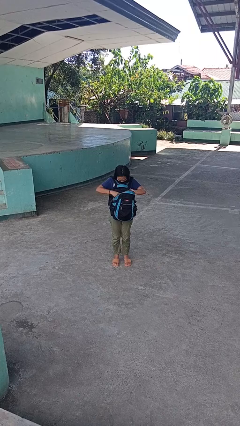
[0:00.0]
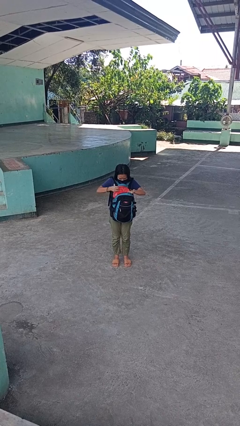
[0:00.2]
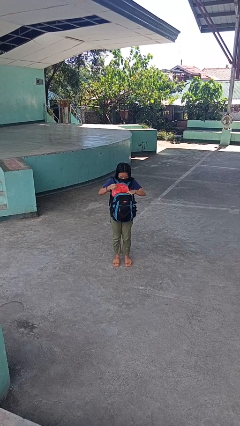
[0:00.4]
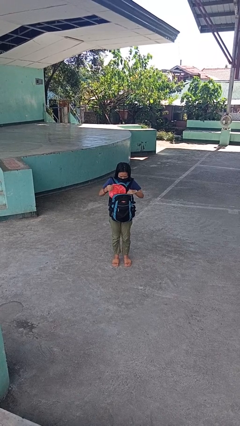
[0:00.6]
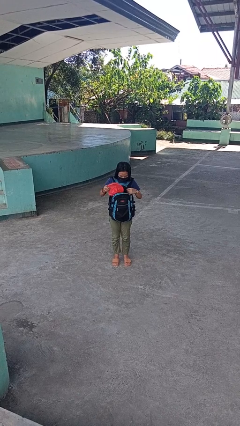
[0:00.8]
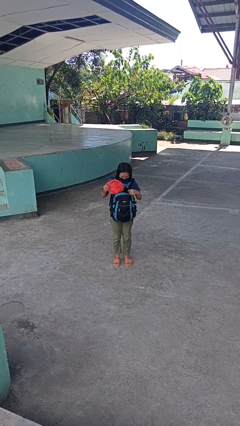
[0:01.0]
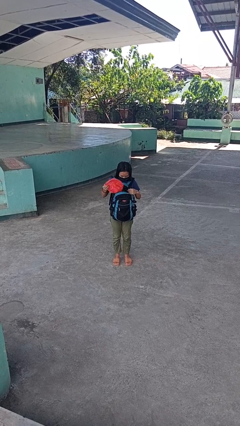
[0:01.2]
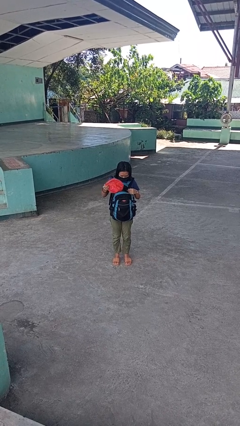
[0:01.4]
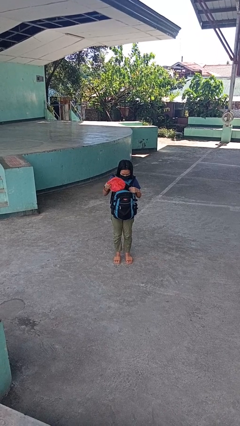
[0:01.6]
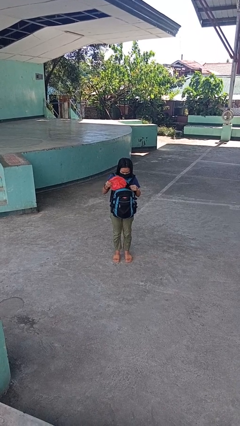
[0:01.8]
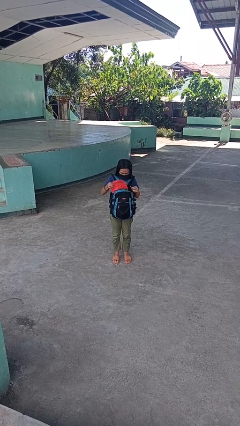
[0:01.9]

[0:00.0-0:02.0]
person takes object from backpack

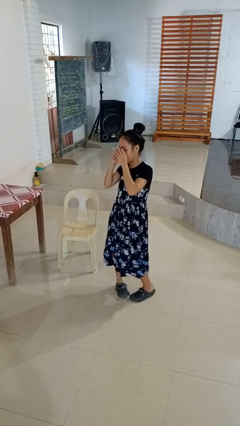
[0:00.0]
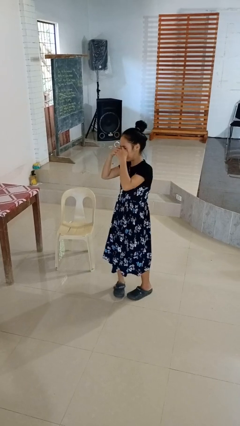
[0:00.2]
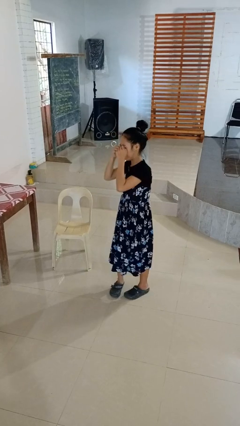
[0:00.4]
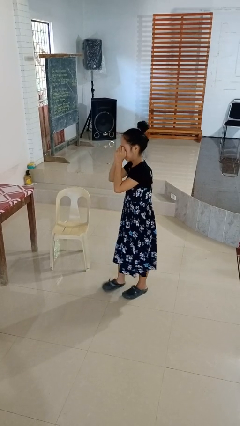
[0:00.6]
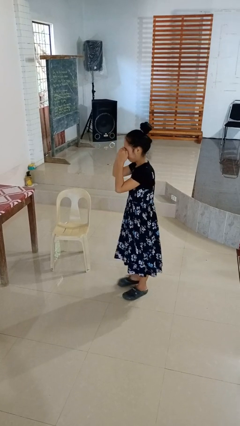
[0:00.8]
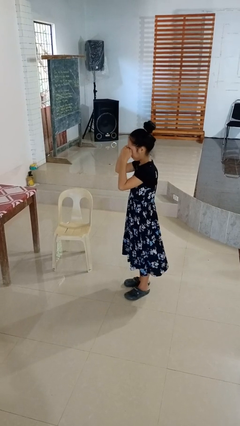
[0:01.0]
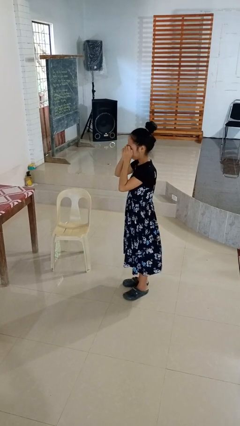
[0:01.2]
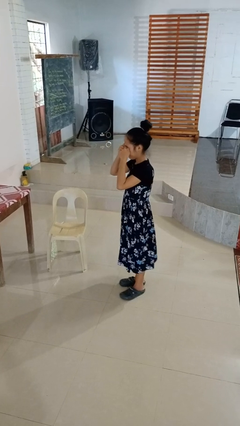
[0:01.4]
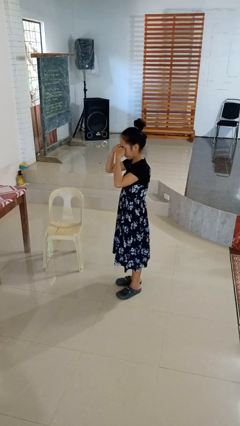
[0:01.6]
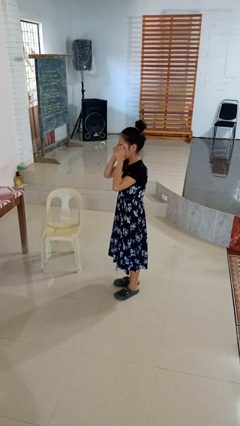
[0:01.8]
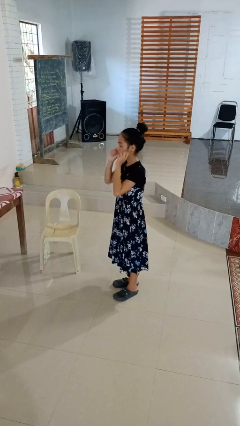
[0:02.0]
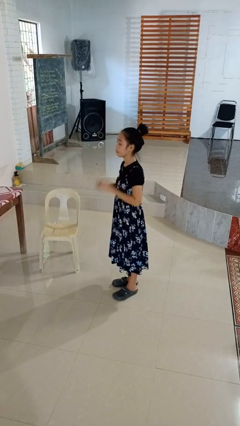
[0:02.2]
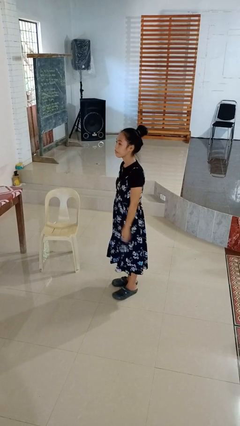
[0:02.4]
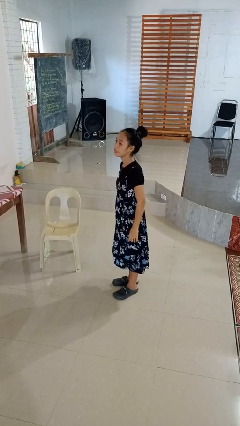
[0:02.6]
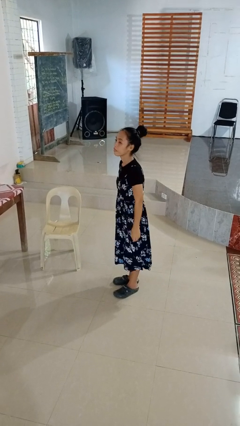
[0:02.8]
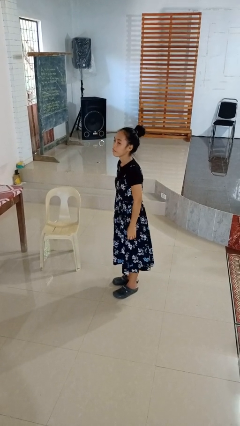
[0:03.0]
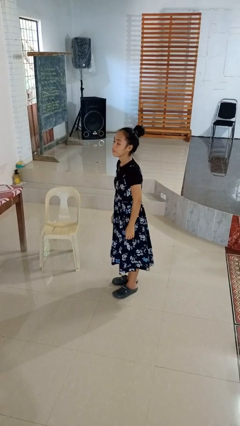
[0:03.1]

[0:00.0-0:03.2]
person rubs eyes

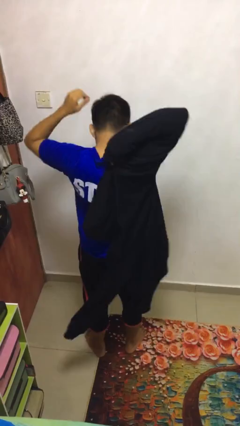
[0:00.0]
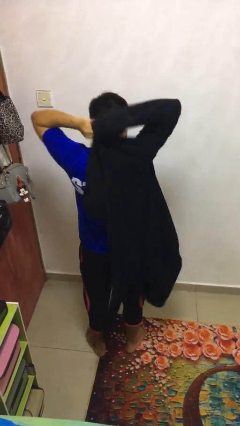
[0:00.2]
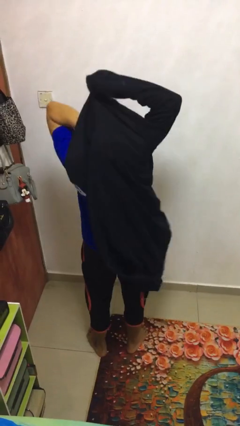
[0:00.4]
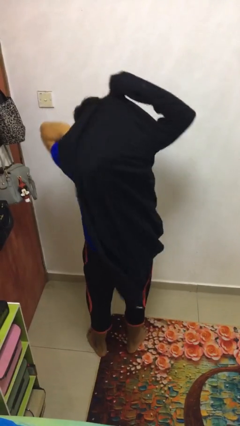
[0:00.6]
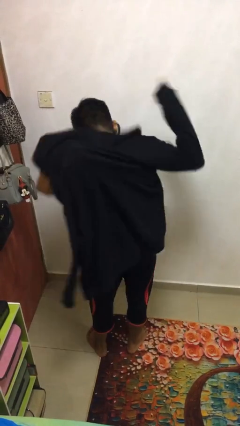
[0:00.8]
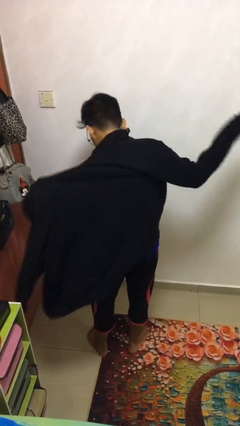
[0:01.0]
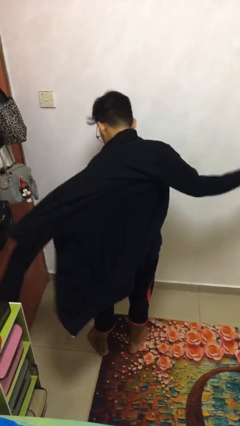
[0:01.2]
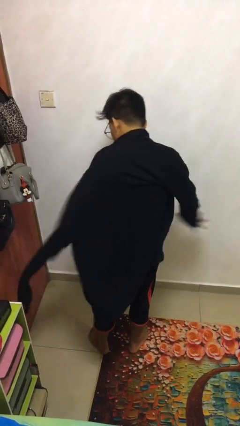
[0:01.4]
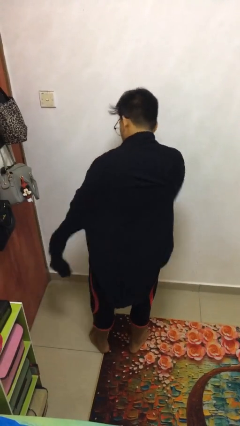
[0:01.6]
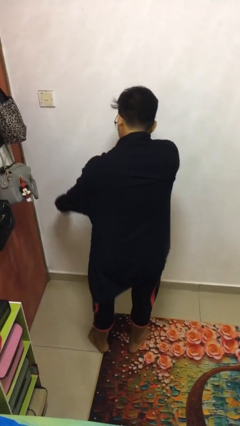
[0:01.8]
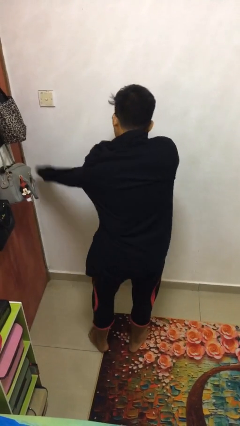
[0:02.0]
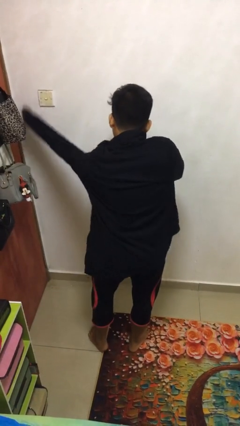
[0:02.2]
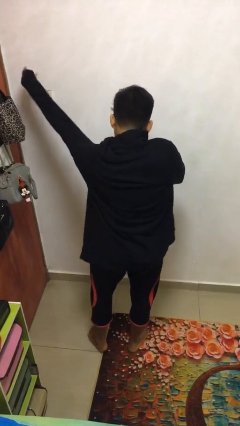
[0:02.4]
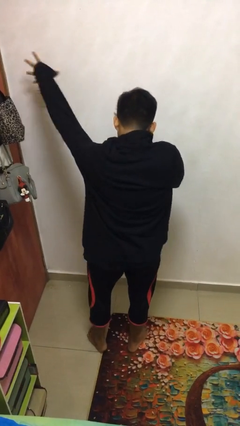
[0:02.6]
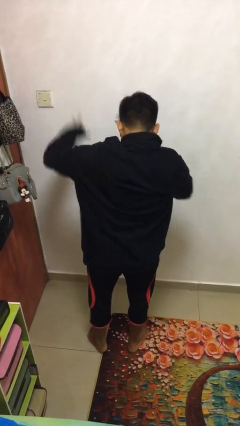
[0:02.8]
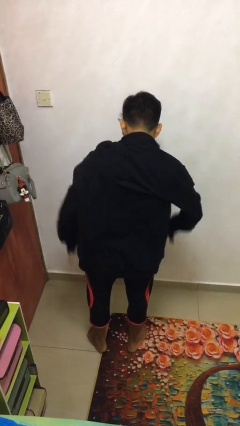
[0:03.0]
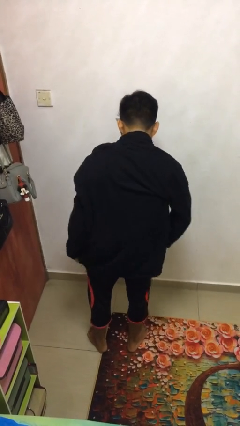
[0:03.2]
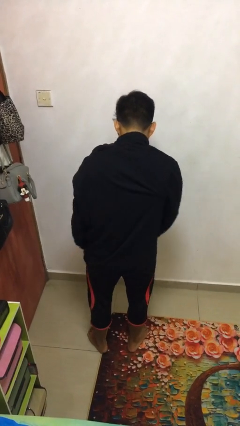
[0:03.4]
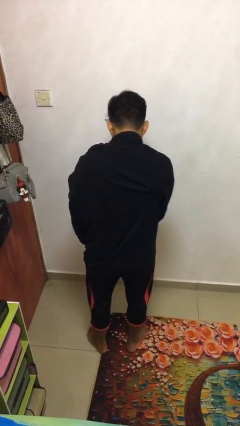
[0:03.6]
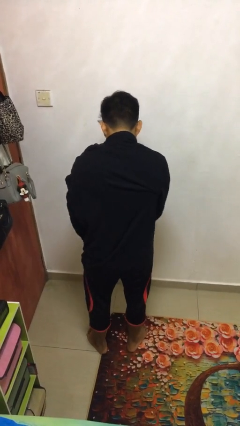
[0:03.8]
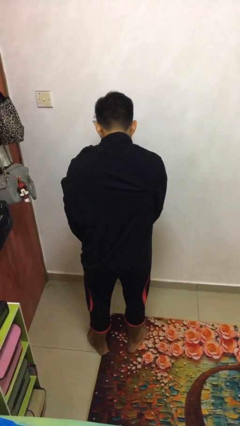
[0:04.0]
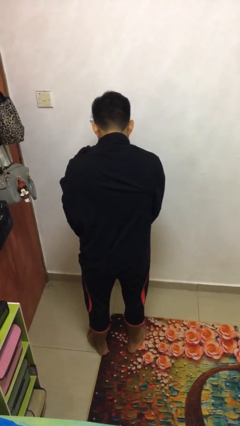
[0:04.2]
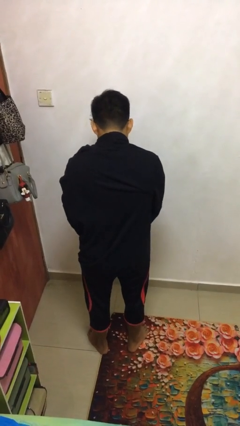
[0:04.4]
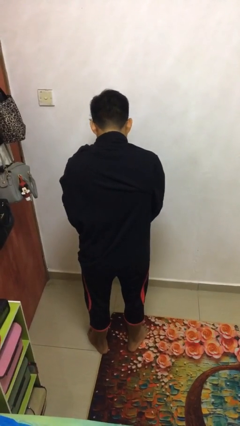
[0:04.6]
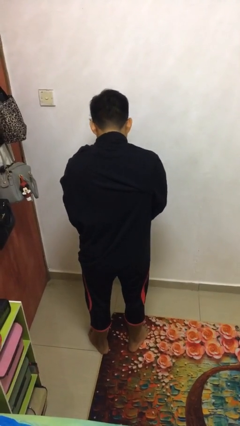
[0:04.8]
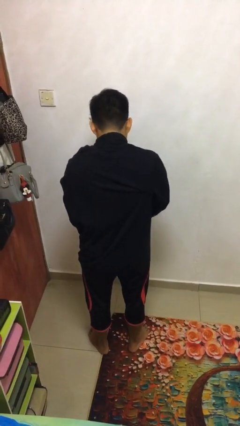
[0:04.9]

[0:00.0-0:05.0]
person zips up jacket

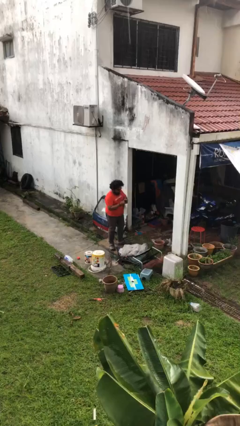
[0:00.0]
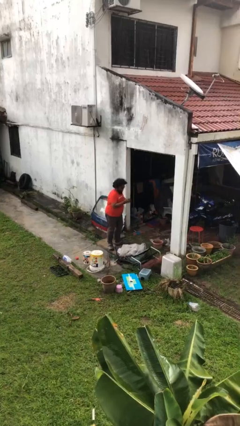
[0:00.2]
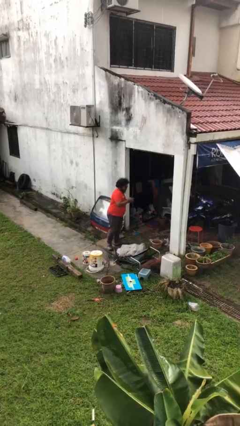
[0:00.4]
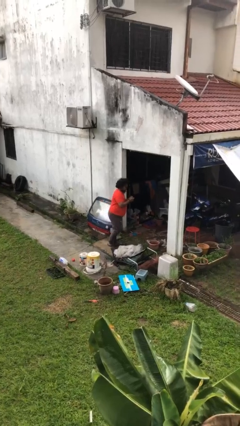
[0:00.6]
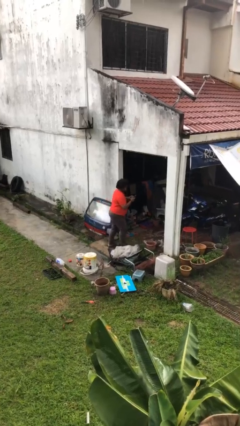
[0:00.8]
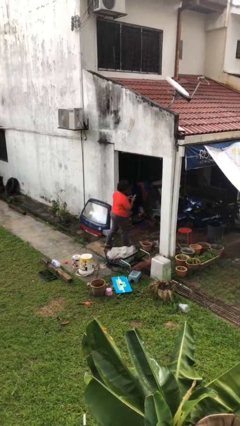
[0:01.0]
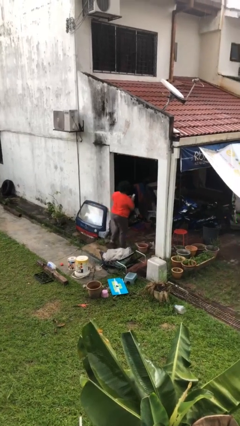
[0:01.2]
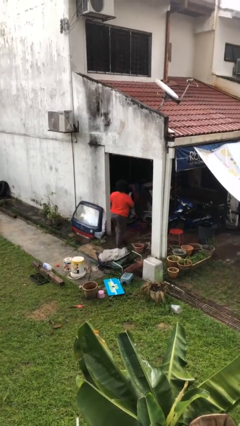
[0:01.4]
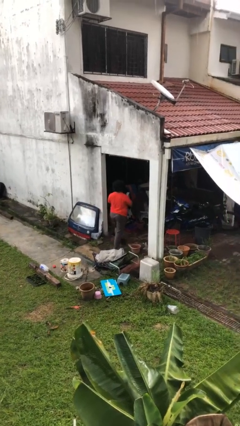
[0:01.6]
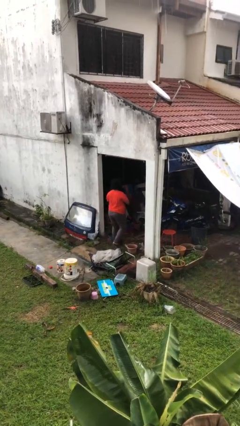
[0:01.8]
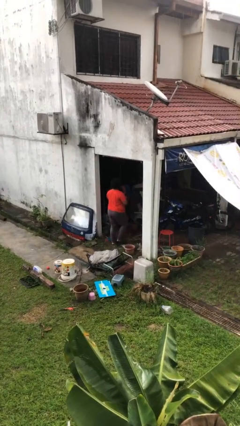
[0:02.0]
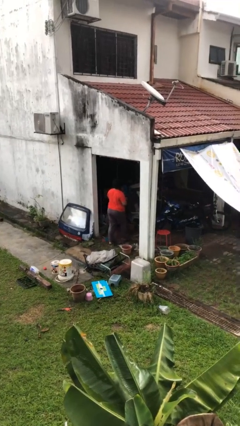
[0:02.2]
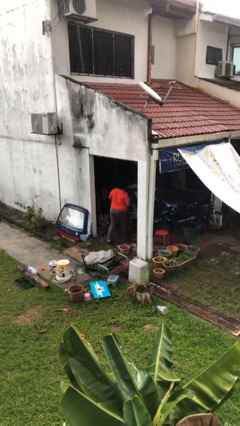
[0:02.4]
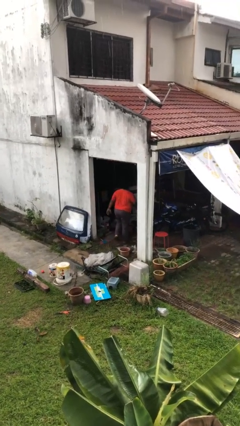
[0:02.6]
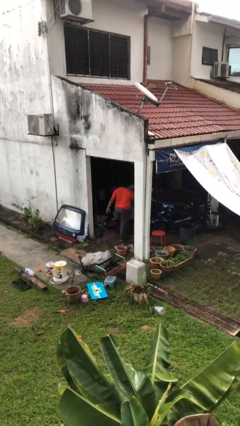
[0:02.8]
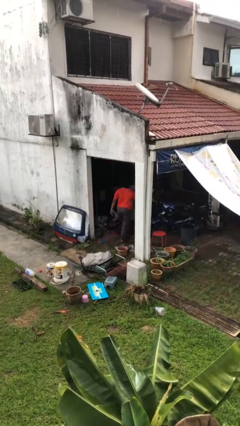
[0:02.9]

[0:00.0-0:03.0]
person exits scene through structure

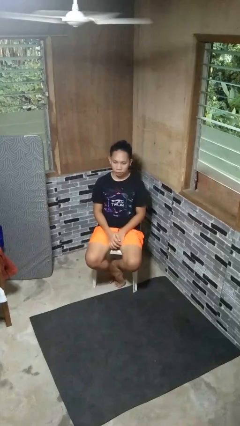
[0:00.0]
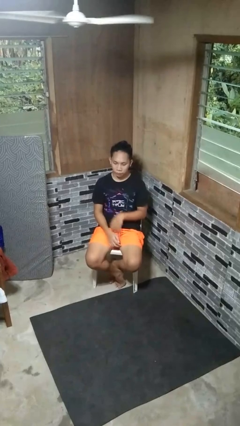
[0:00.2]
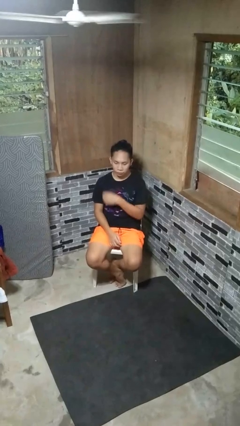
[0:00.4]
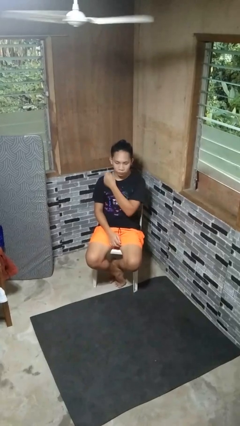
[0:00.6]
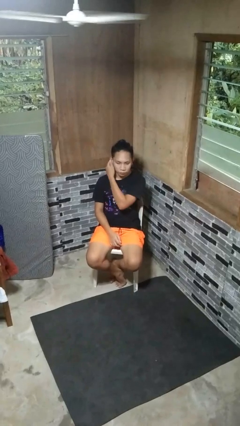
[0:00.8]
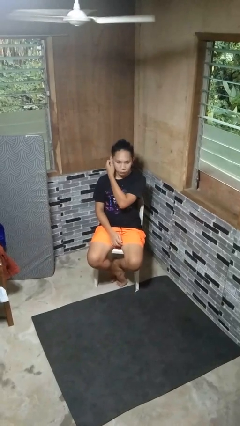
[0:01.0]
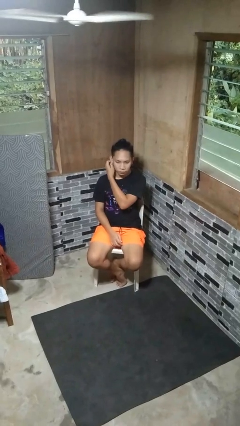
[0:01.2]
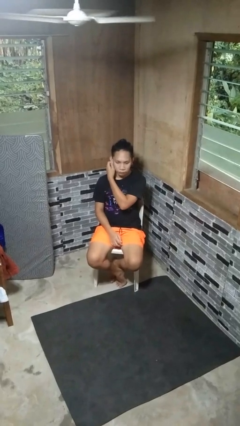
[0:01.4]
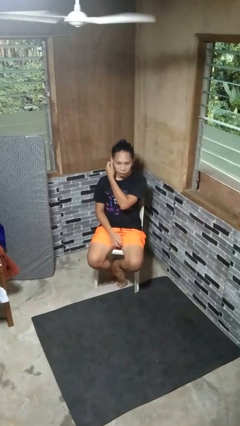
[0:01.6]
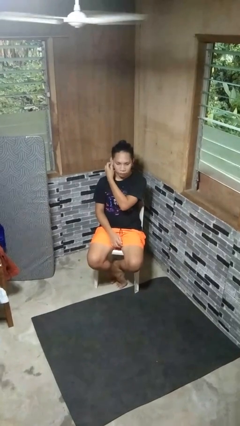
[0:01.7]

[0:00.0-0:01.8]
person touches earlobe

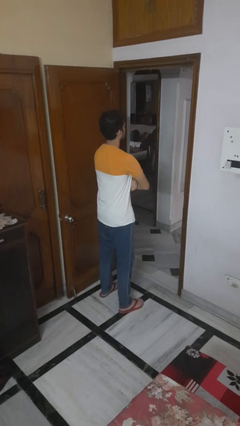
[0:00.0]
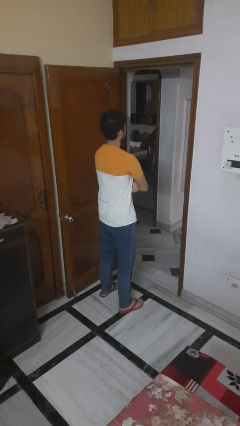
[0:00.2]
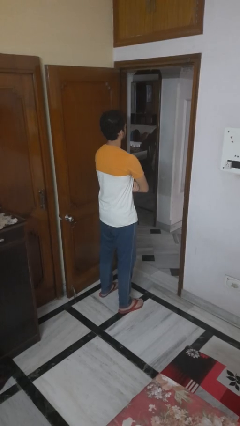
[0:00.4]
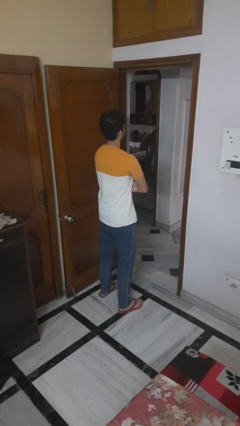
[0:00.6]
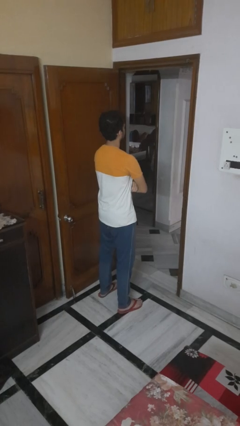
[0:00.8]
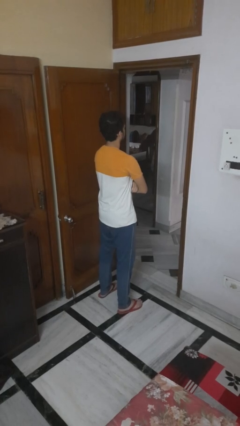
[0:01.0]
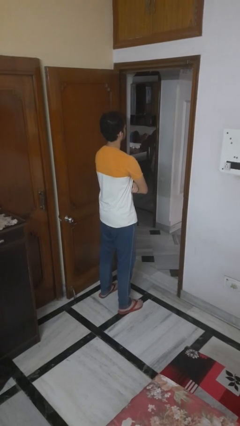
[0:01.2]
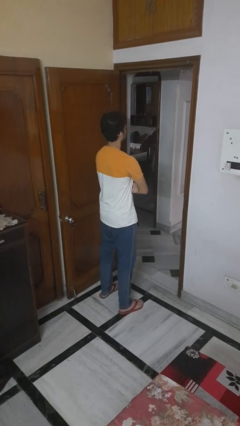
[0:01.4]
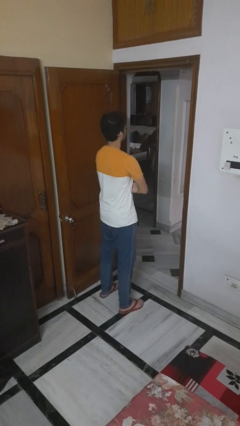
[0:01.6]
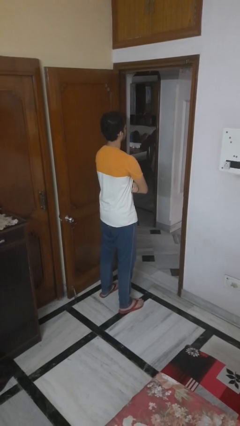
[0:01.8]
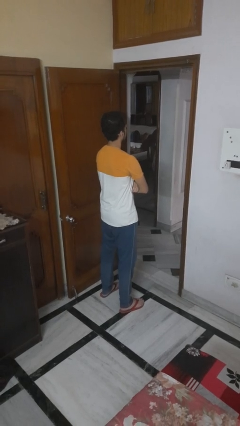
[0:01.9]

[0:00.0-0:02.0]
person crosses arms
